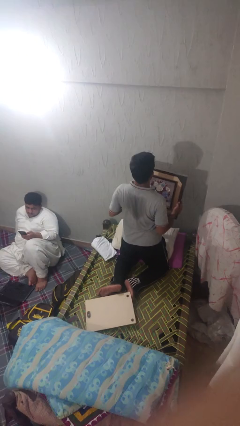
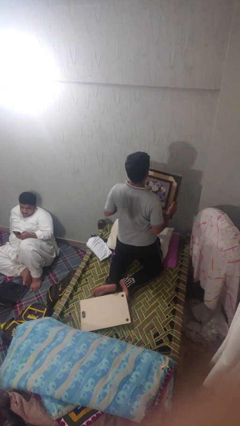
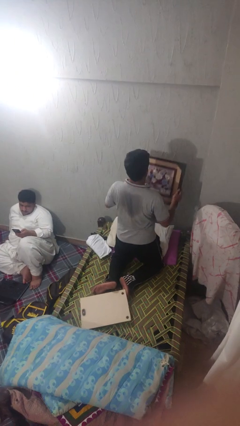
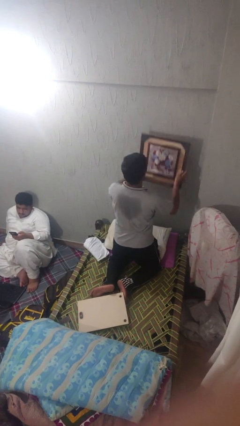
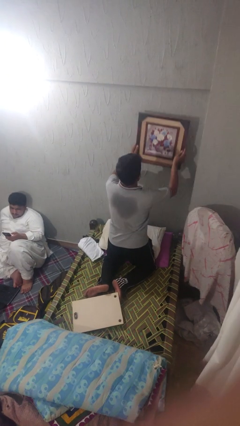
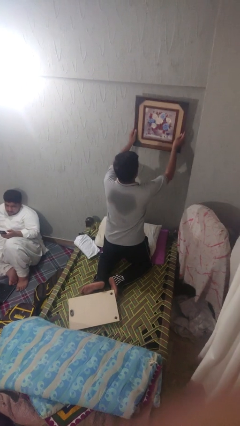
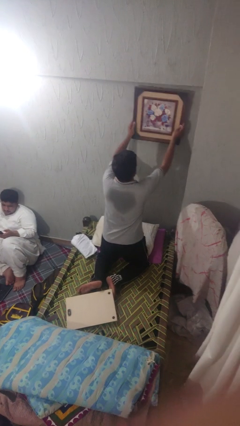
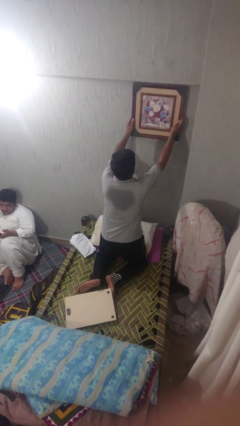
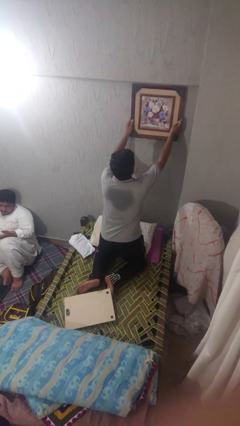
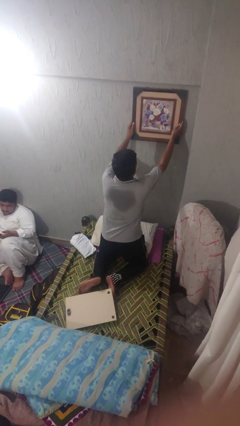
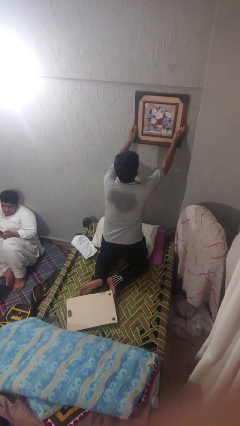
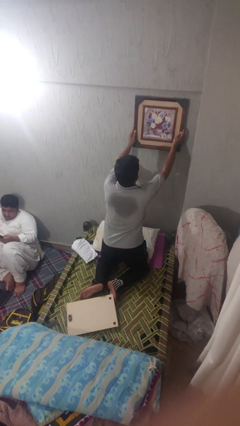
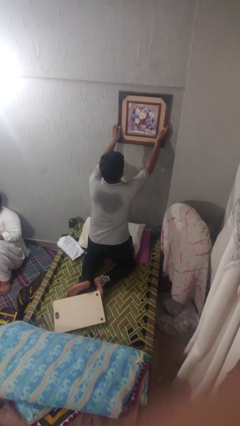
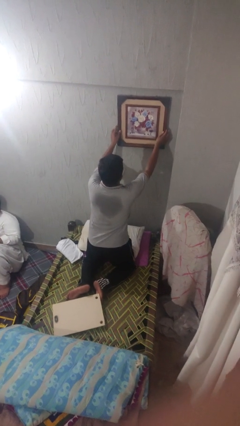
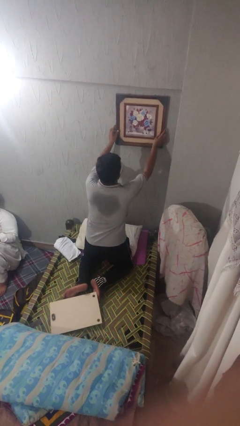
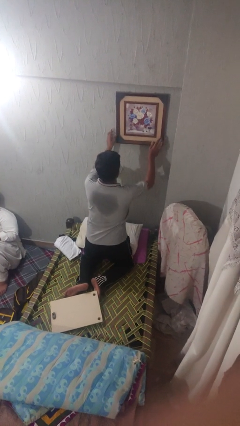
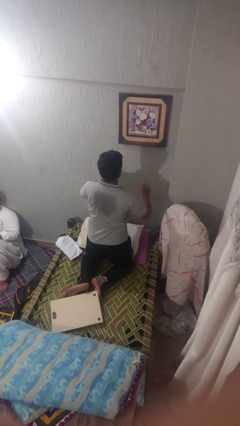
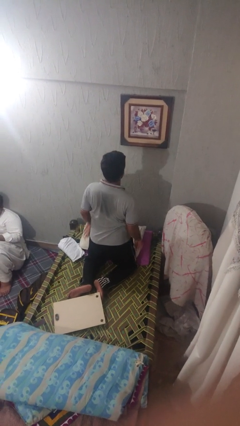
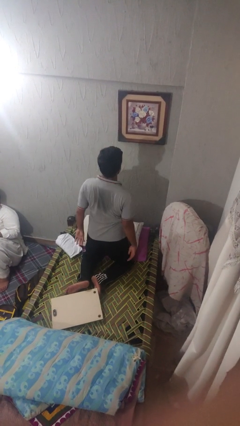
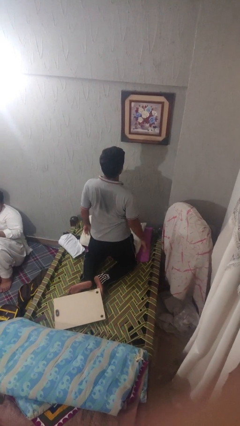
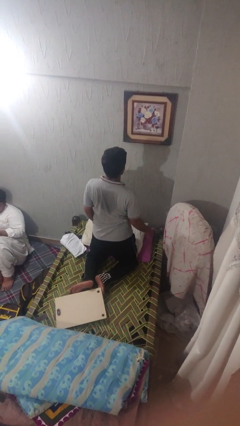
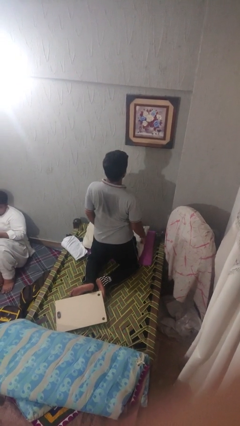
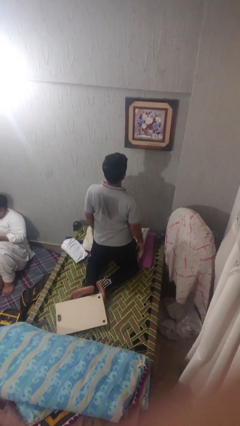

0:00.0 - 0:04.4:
person puts up picture frame

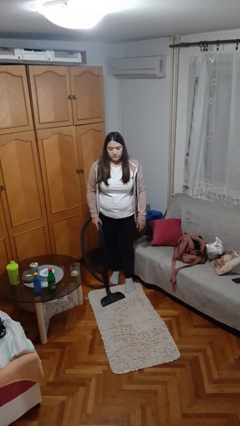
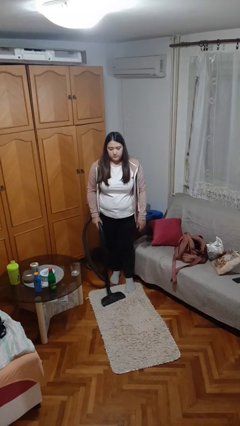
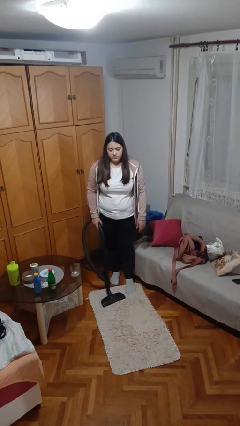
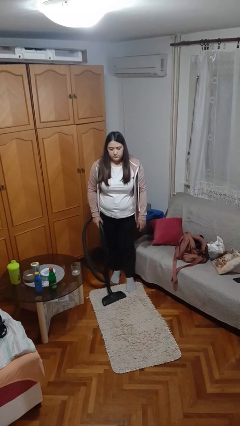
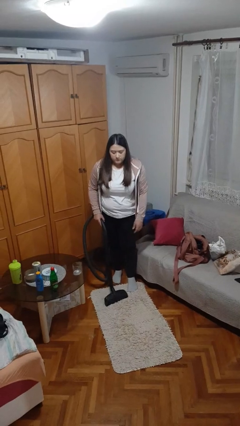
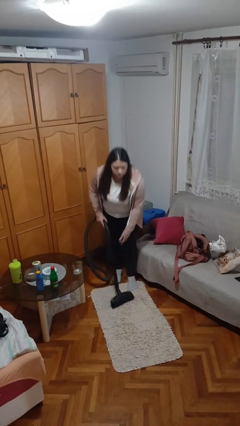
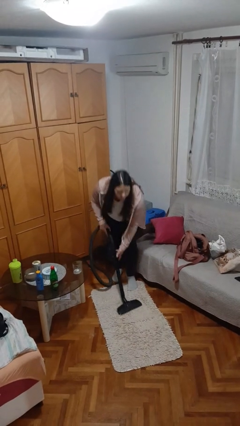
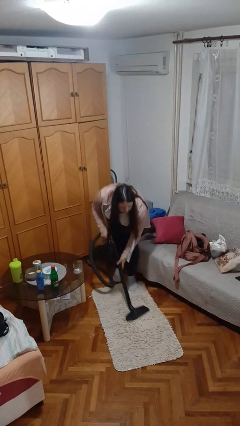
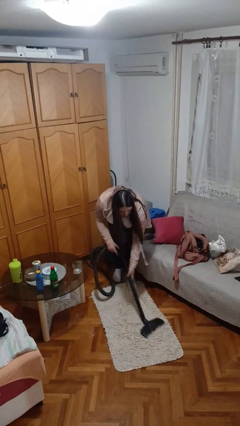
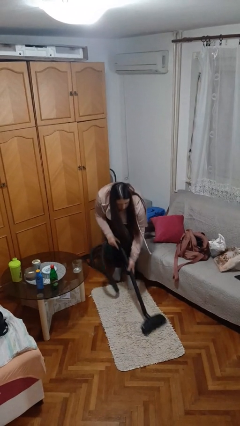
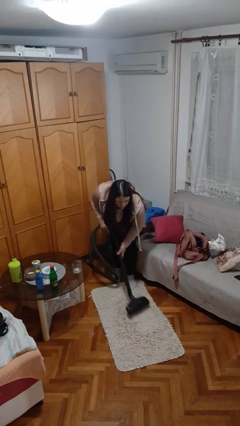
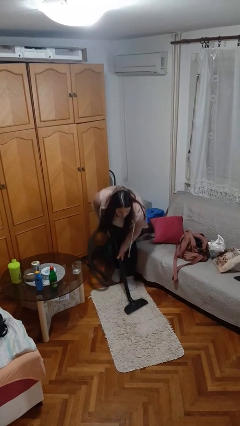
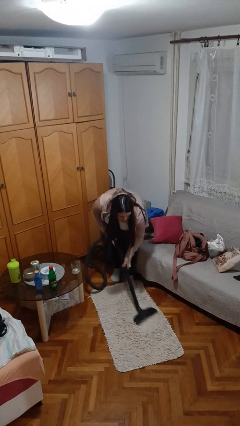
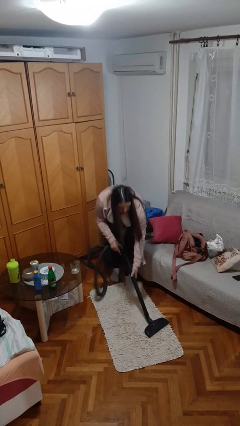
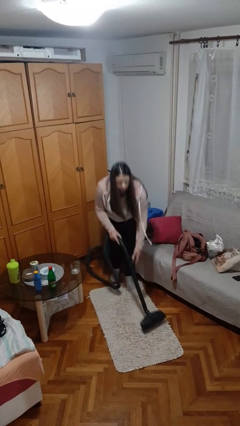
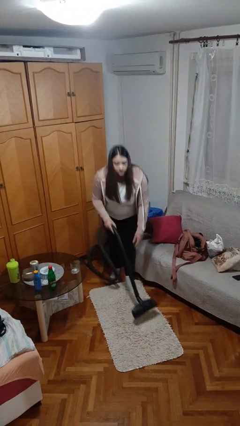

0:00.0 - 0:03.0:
person vacuums carpet

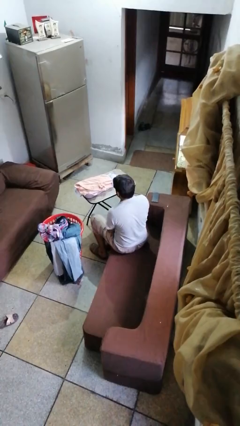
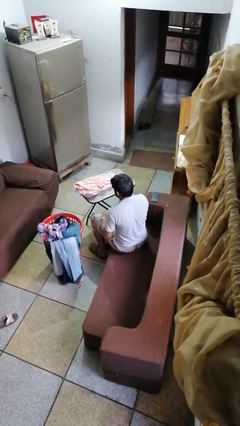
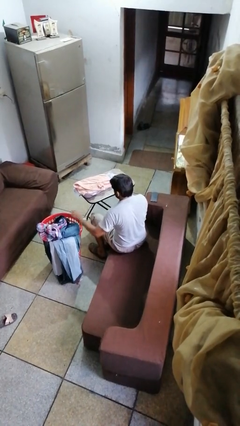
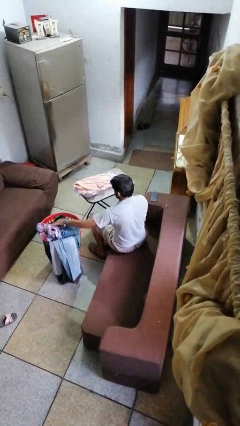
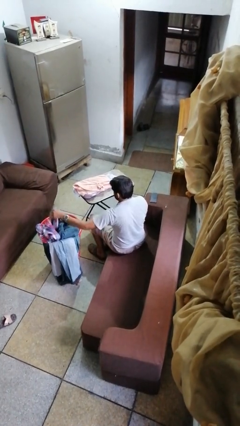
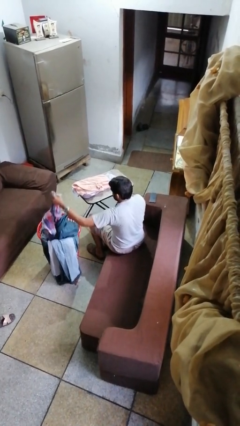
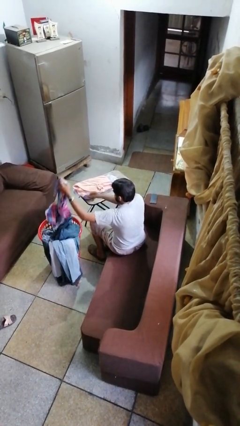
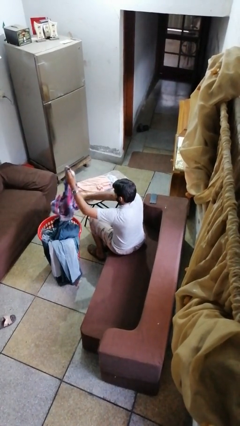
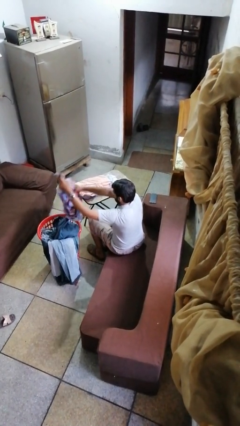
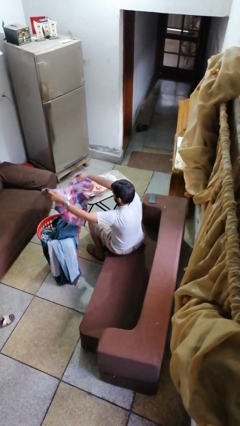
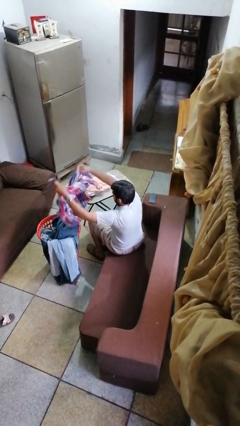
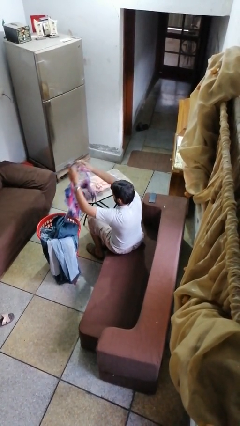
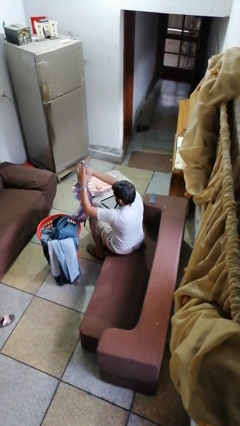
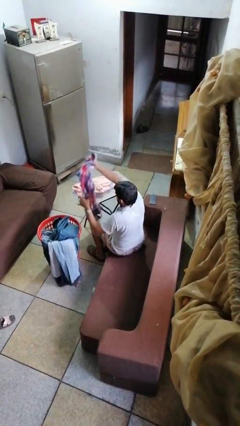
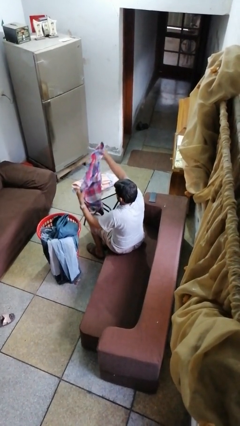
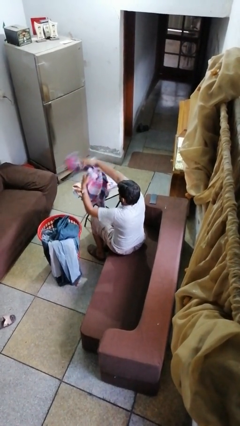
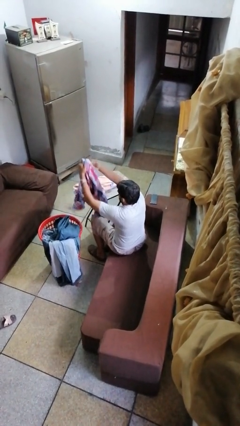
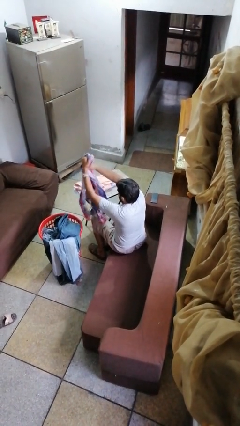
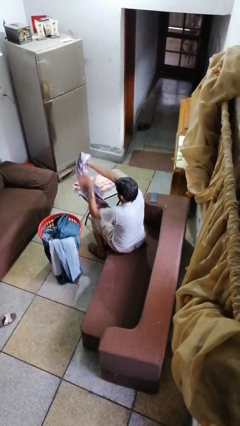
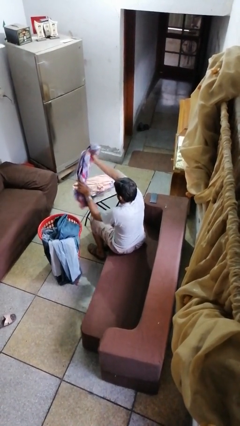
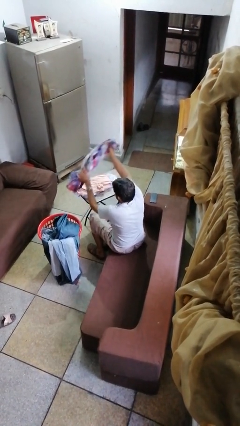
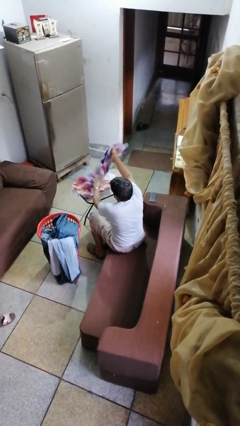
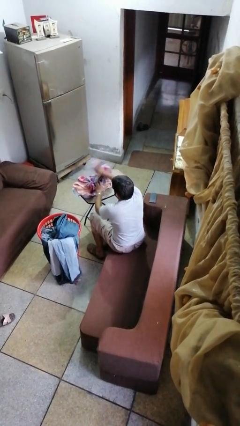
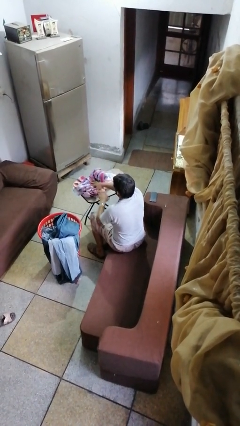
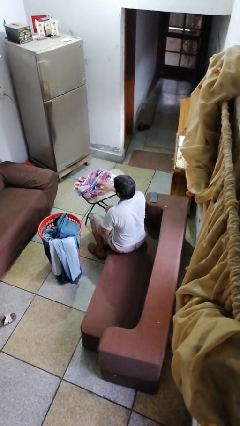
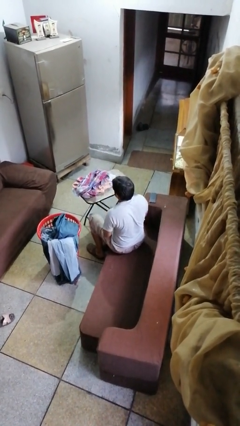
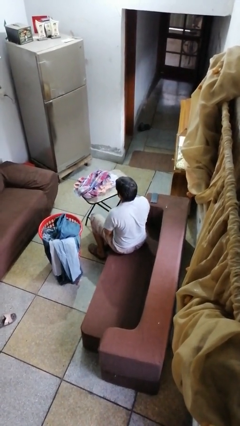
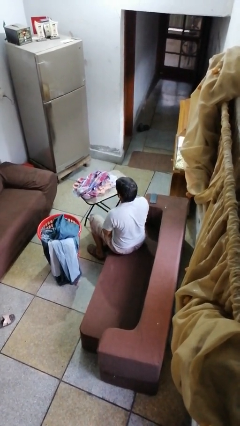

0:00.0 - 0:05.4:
person folds shirt

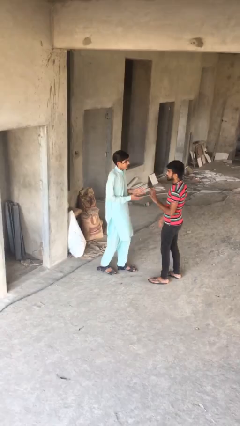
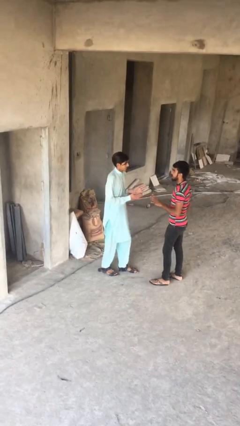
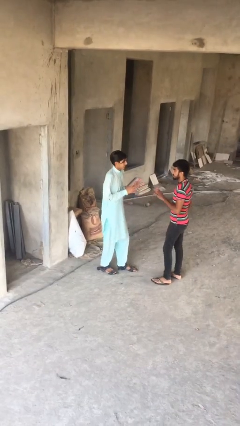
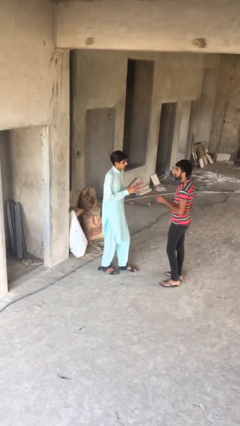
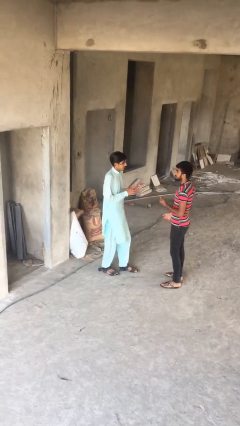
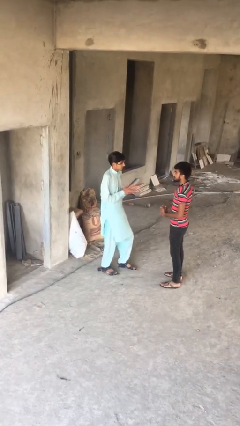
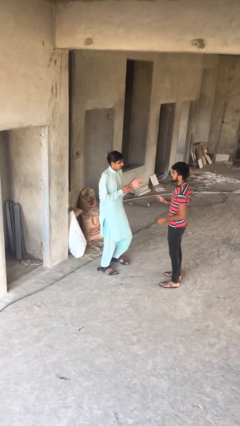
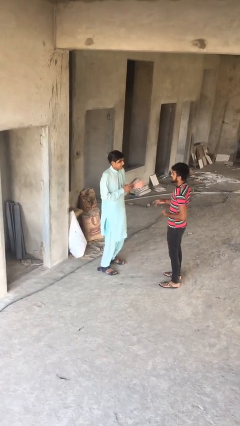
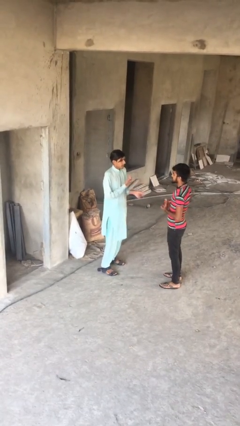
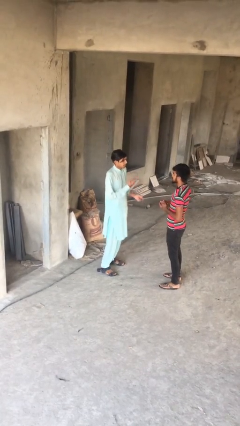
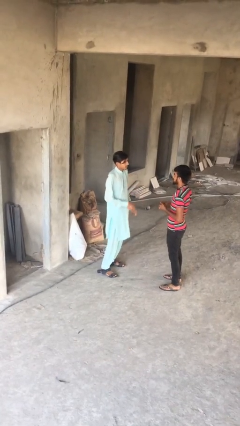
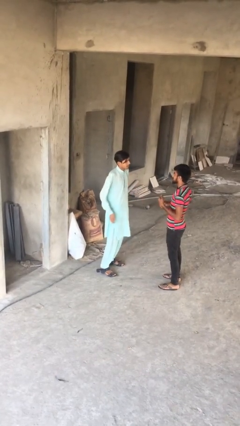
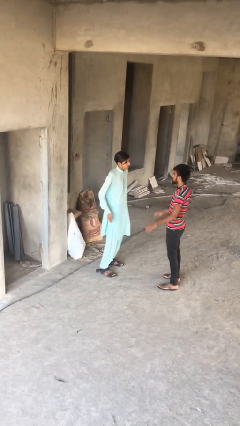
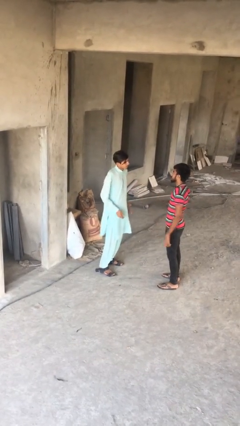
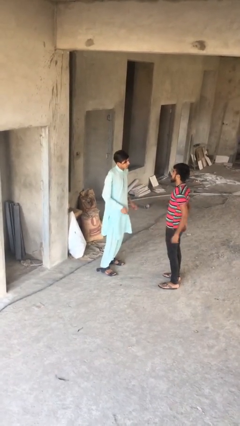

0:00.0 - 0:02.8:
person talks to person

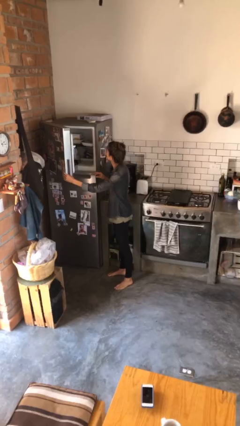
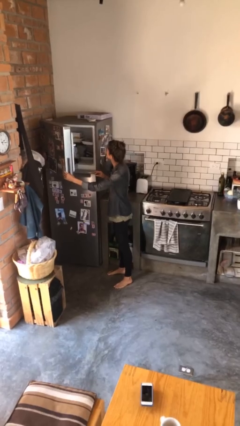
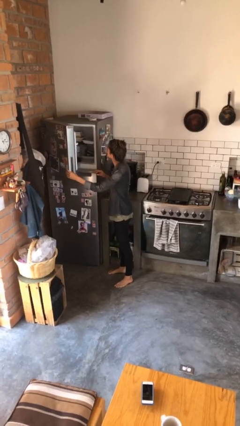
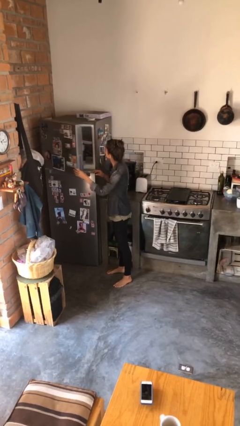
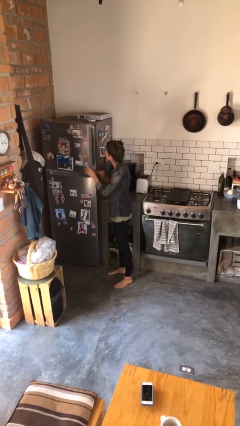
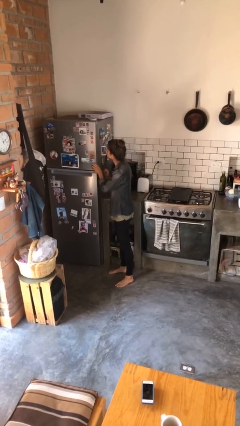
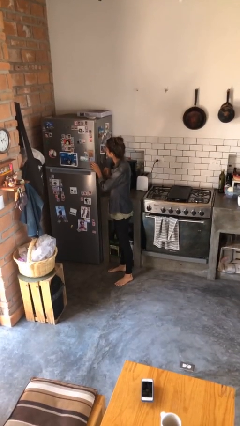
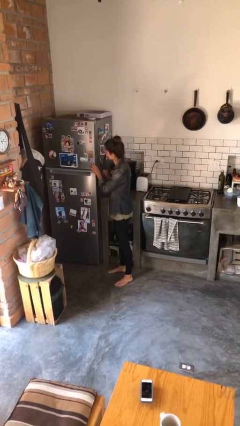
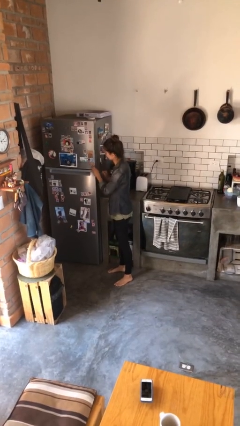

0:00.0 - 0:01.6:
person closes refrigerator
